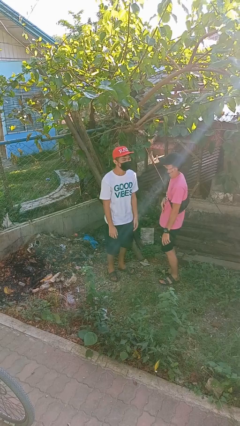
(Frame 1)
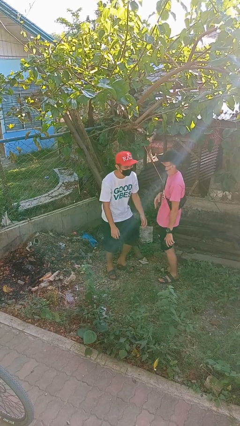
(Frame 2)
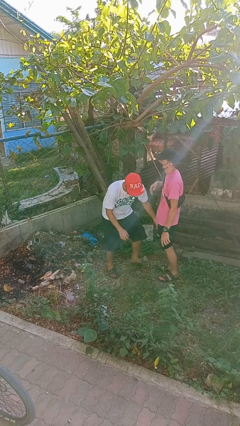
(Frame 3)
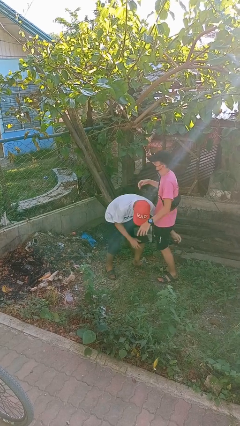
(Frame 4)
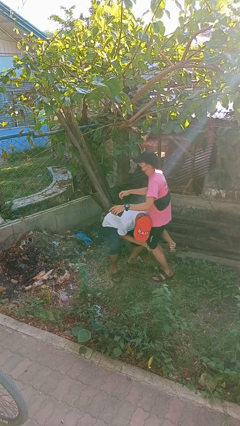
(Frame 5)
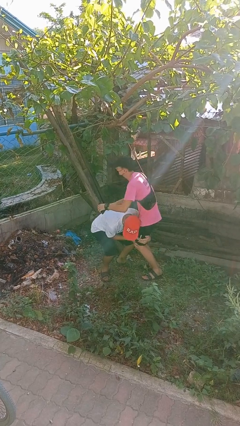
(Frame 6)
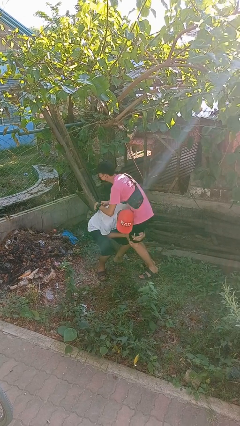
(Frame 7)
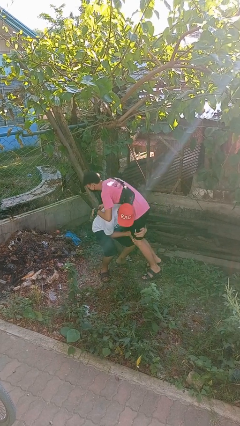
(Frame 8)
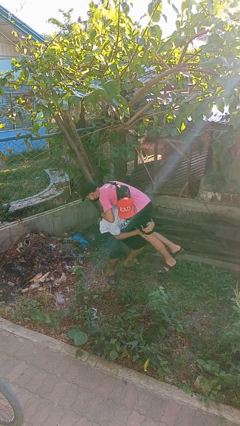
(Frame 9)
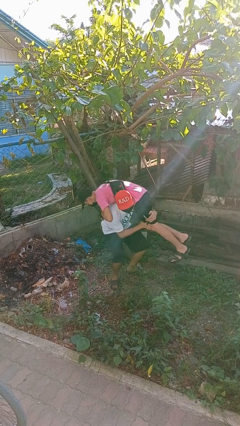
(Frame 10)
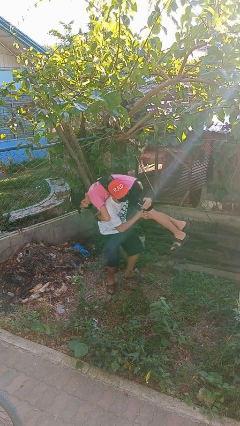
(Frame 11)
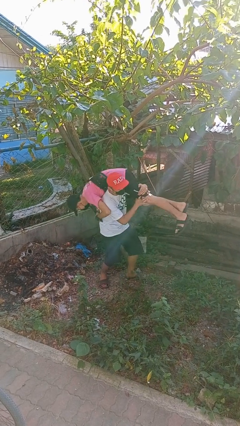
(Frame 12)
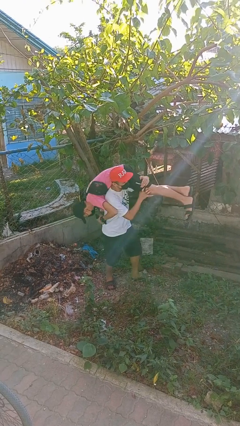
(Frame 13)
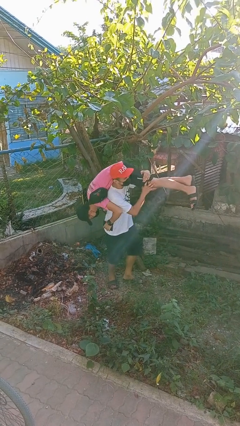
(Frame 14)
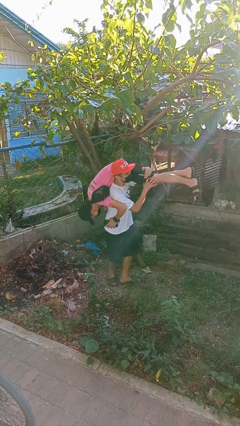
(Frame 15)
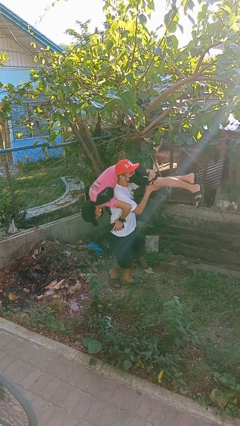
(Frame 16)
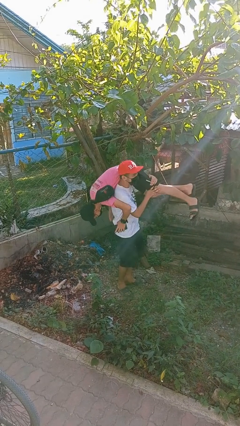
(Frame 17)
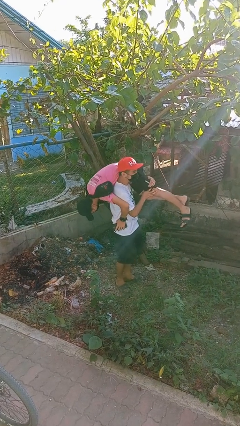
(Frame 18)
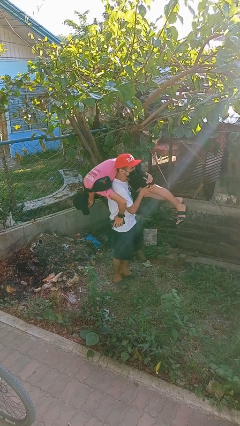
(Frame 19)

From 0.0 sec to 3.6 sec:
person carries person over shoulder

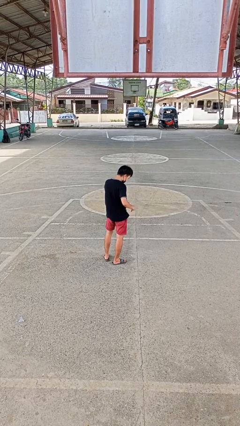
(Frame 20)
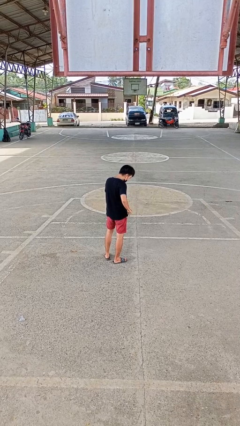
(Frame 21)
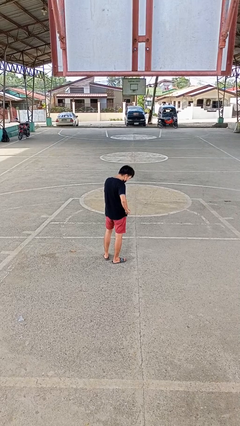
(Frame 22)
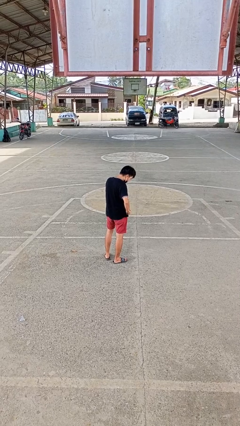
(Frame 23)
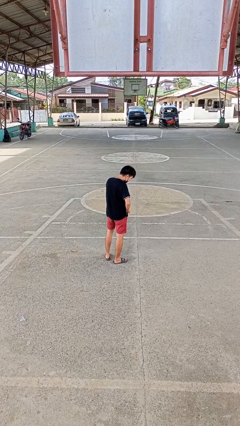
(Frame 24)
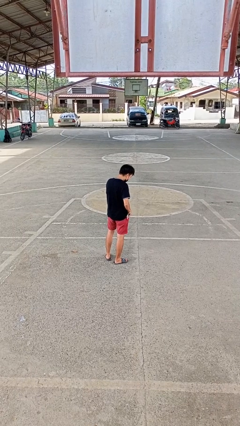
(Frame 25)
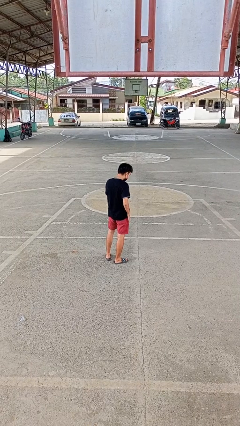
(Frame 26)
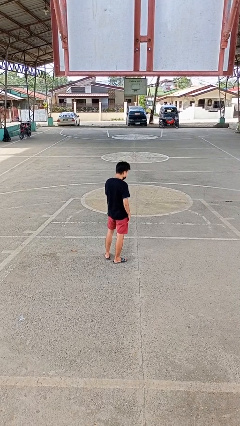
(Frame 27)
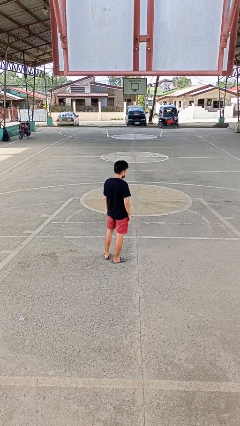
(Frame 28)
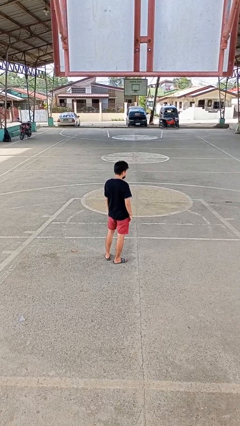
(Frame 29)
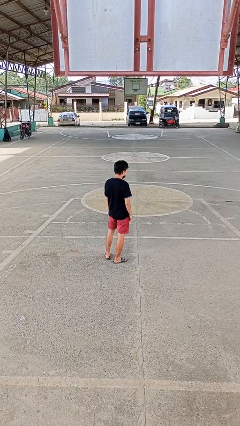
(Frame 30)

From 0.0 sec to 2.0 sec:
person puts phone into pocket

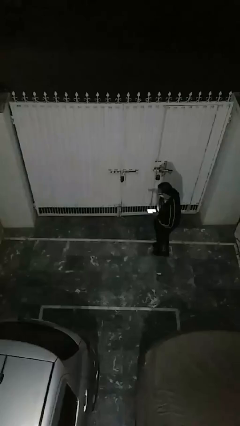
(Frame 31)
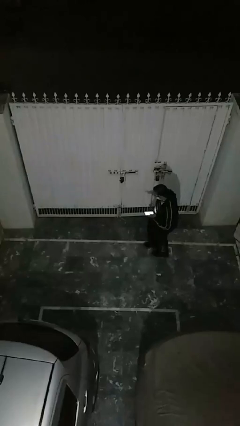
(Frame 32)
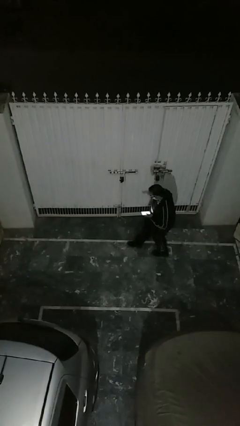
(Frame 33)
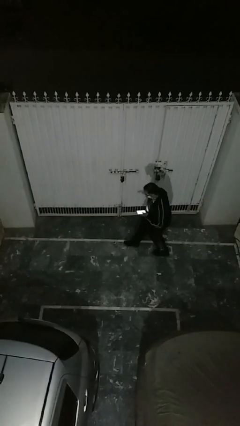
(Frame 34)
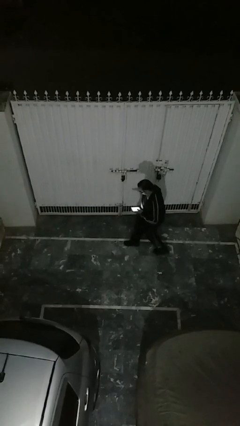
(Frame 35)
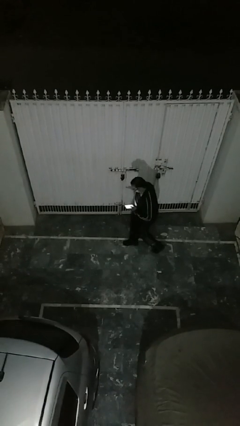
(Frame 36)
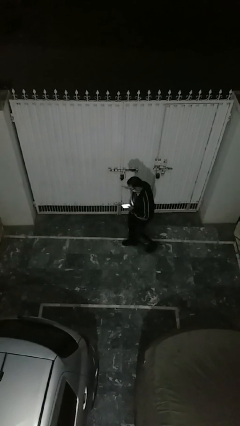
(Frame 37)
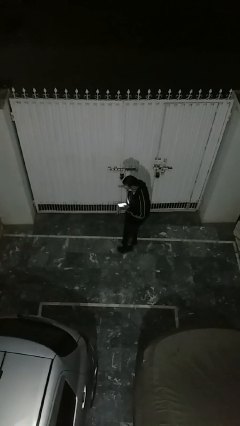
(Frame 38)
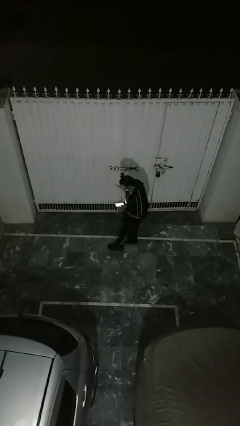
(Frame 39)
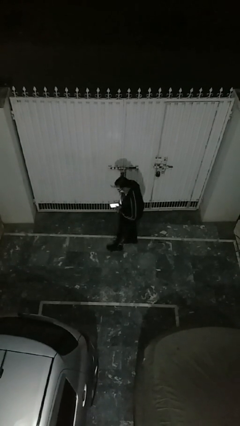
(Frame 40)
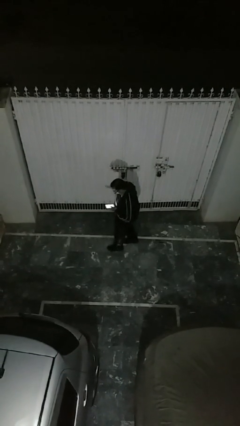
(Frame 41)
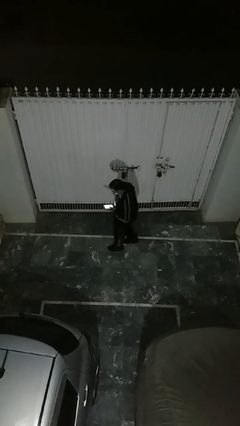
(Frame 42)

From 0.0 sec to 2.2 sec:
person enters scene through structure

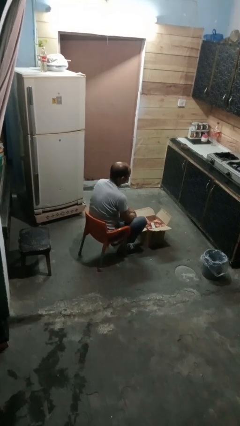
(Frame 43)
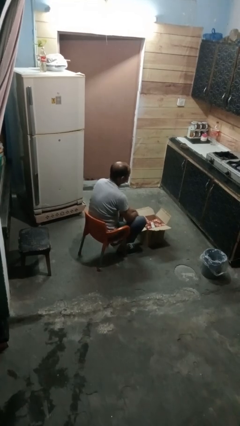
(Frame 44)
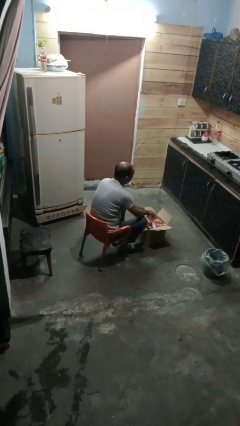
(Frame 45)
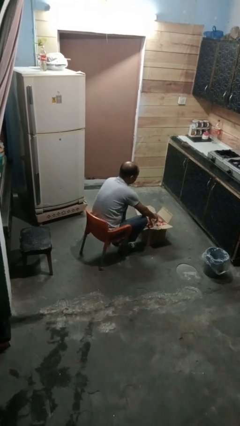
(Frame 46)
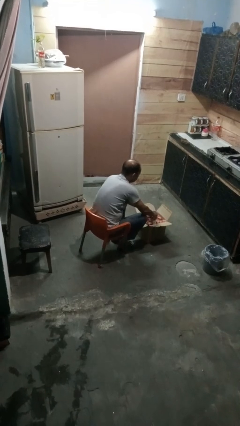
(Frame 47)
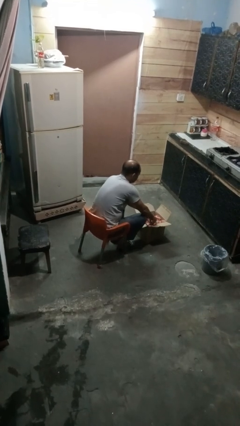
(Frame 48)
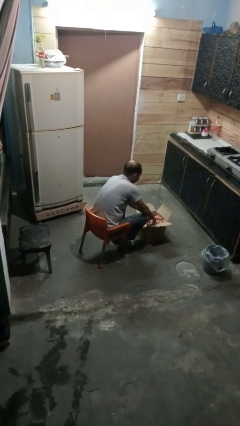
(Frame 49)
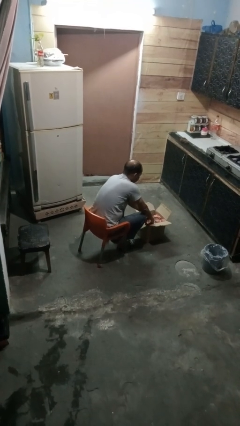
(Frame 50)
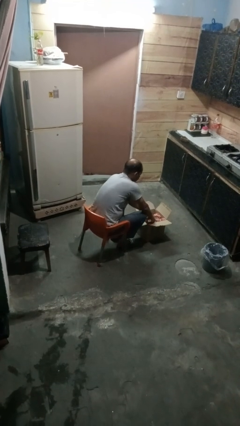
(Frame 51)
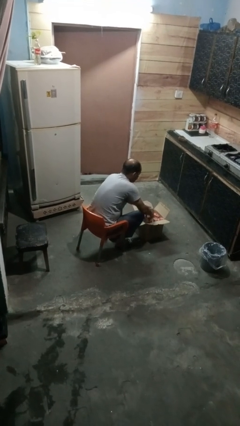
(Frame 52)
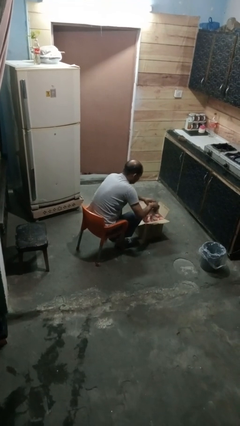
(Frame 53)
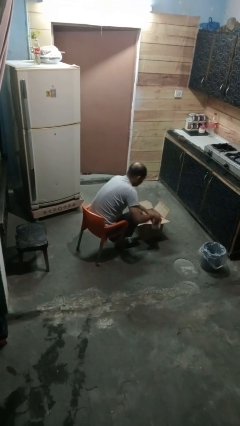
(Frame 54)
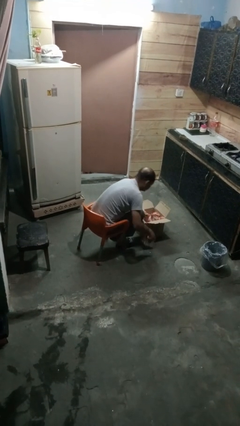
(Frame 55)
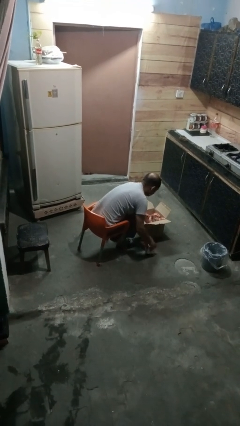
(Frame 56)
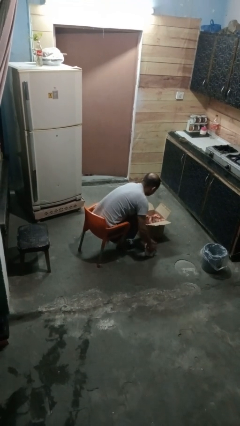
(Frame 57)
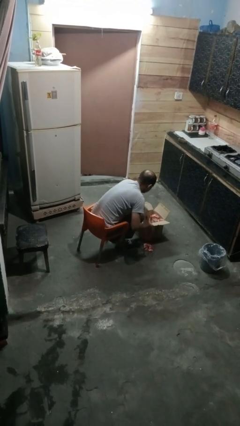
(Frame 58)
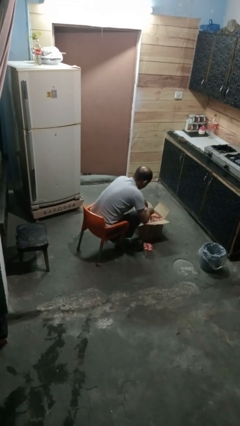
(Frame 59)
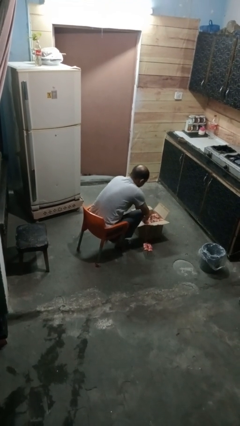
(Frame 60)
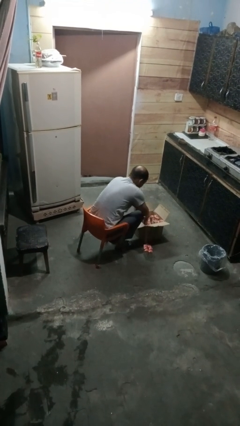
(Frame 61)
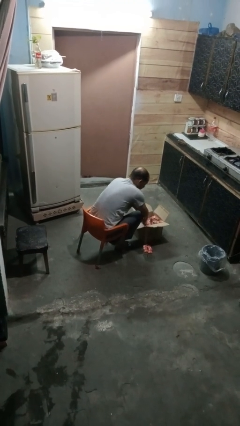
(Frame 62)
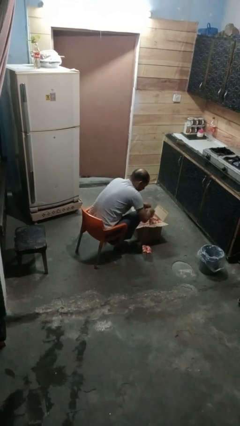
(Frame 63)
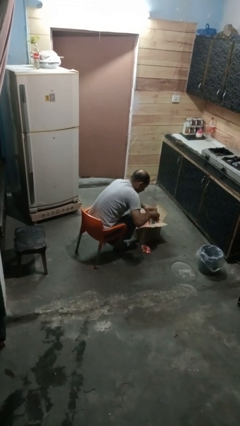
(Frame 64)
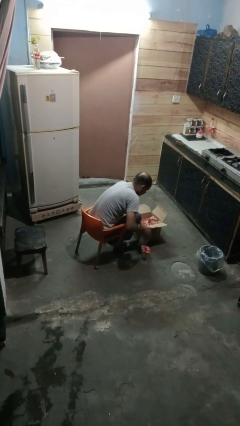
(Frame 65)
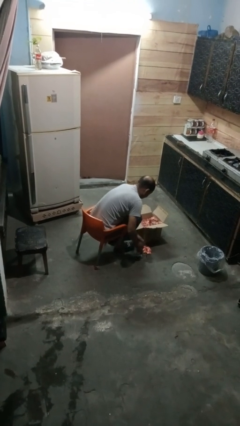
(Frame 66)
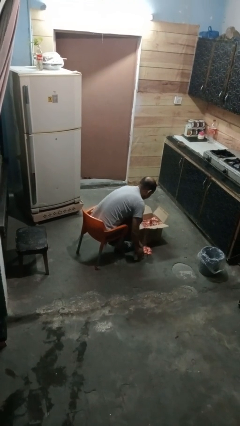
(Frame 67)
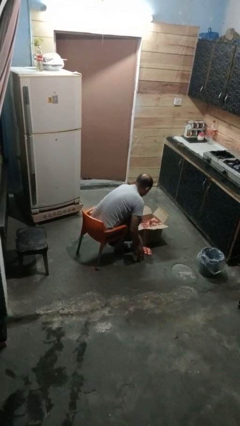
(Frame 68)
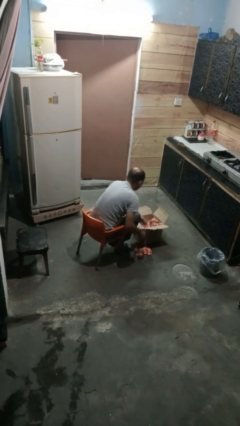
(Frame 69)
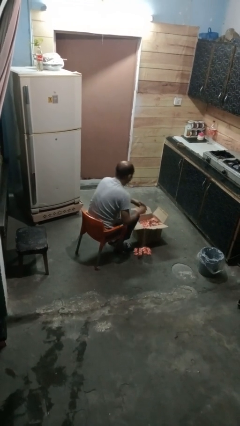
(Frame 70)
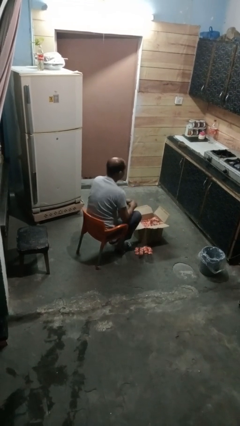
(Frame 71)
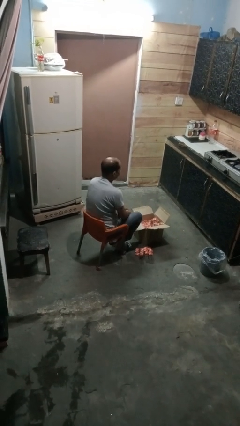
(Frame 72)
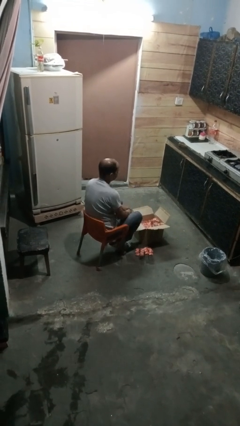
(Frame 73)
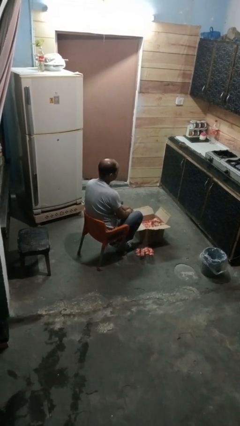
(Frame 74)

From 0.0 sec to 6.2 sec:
person takes object from box

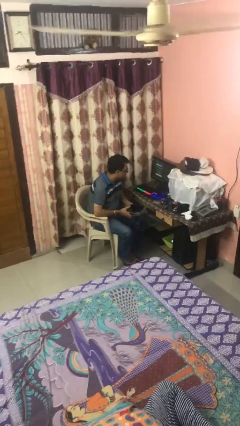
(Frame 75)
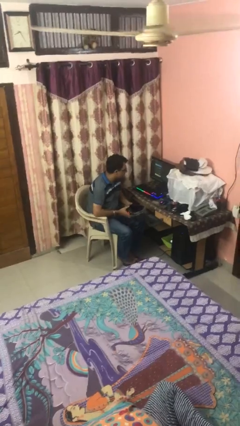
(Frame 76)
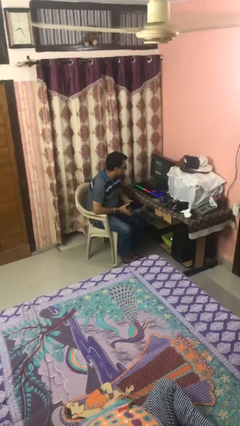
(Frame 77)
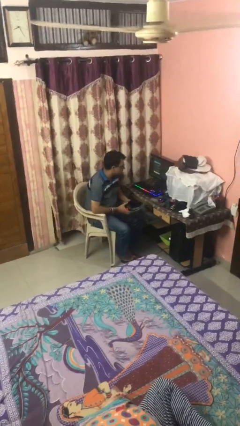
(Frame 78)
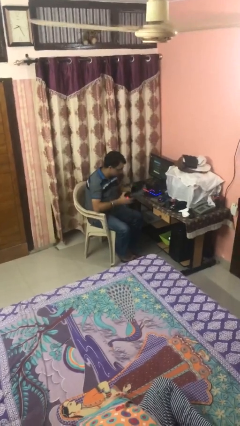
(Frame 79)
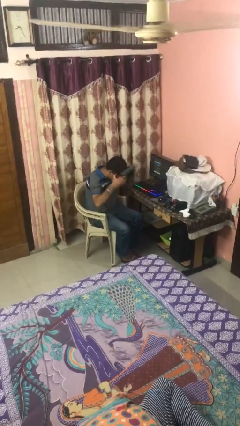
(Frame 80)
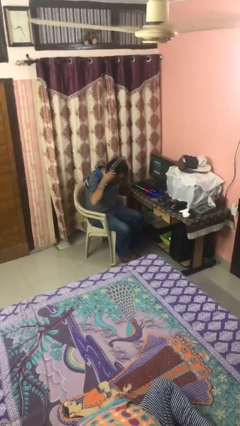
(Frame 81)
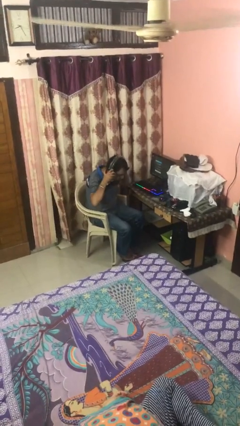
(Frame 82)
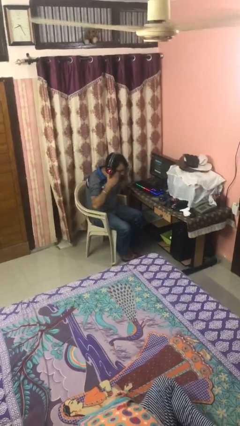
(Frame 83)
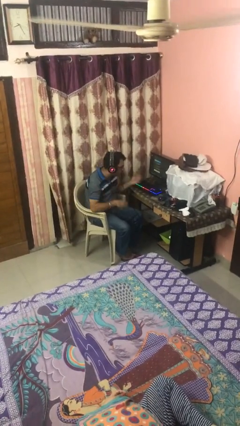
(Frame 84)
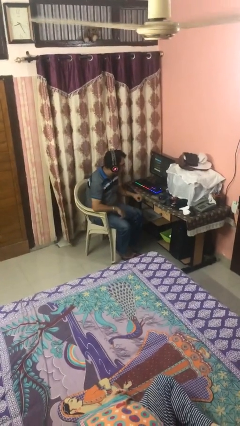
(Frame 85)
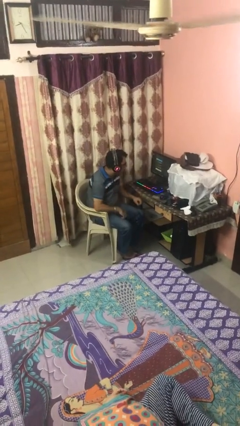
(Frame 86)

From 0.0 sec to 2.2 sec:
person puts on headphones

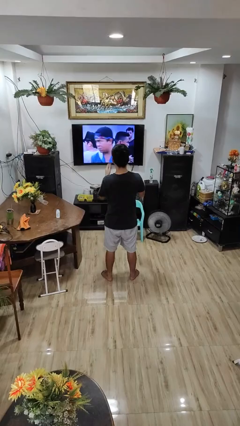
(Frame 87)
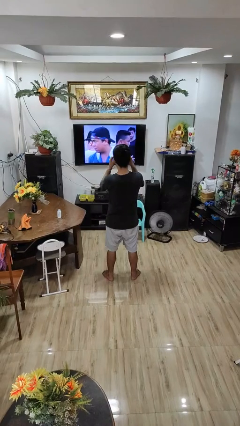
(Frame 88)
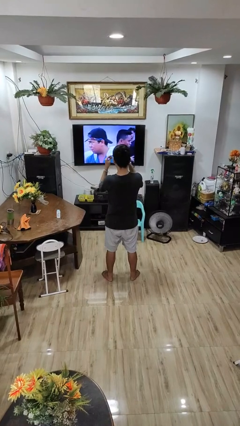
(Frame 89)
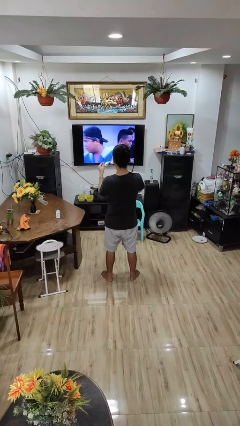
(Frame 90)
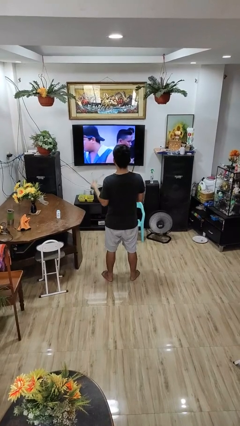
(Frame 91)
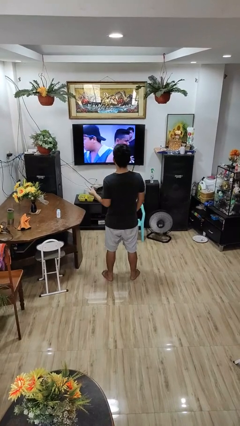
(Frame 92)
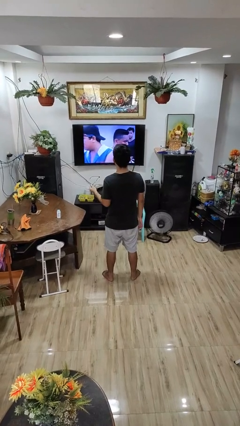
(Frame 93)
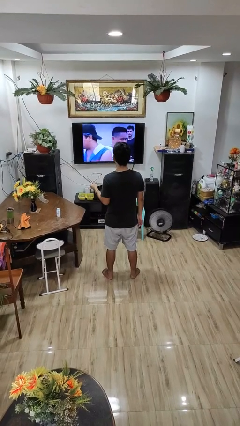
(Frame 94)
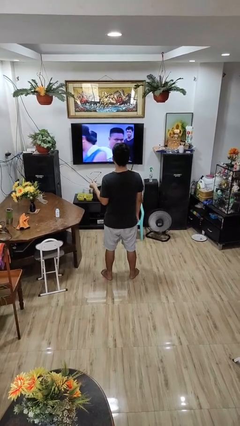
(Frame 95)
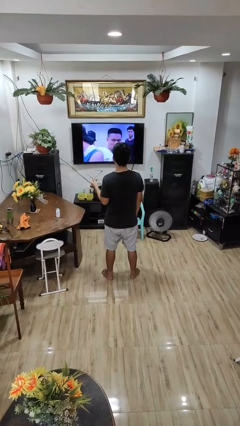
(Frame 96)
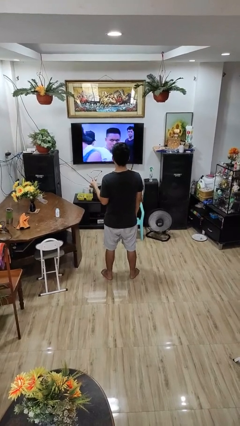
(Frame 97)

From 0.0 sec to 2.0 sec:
person takes off glasses
